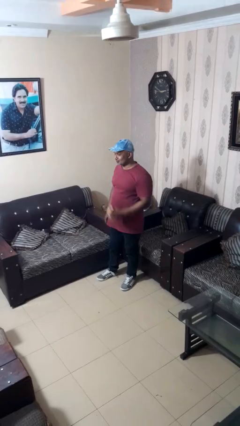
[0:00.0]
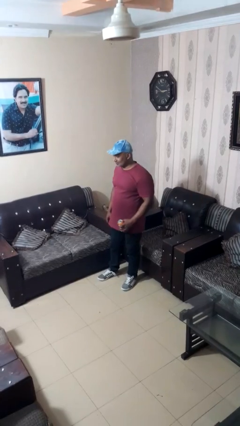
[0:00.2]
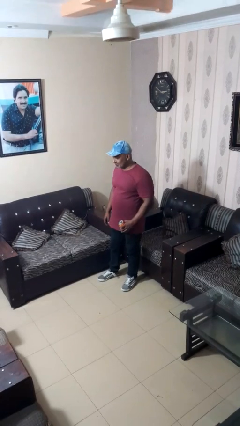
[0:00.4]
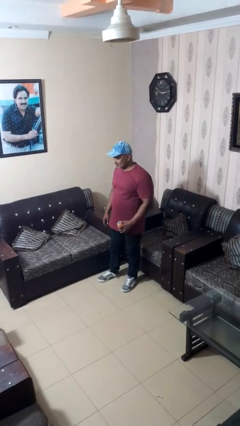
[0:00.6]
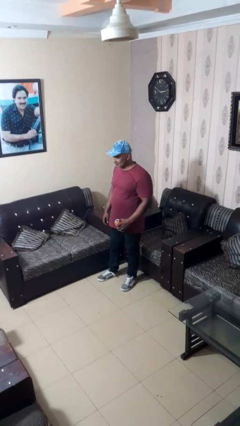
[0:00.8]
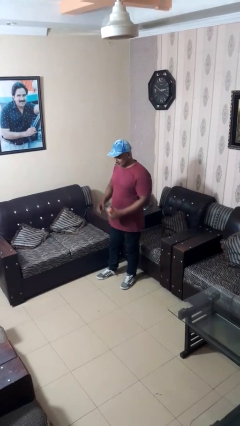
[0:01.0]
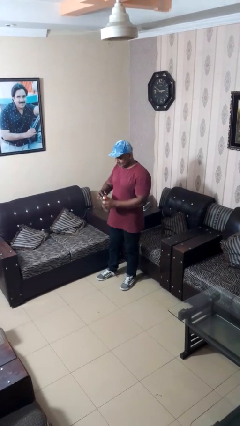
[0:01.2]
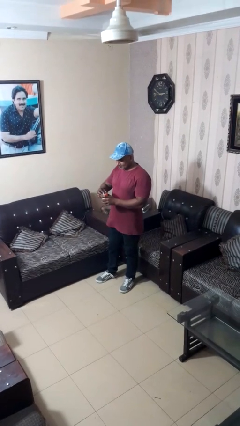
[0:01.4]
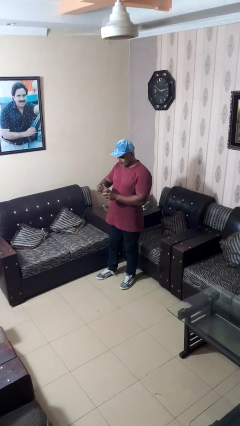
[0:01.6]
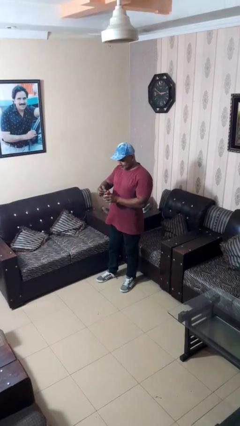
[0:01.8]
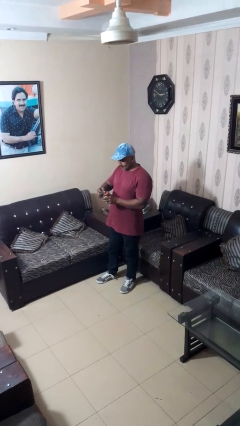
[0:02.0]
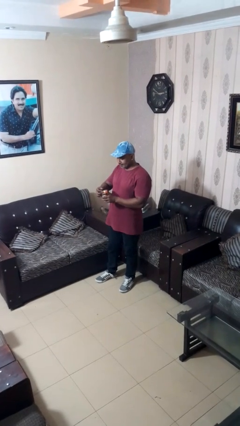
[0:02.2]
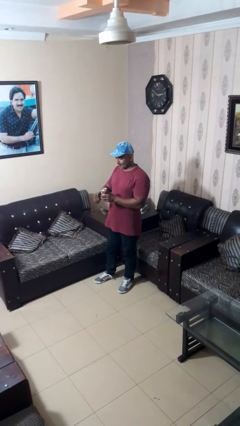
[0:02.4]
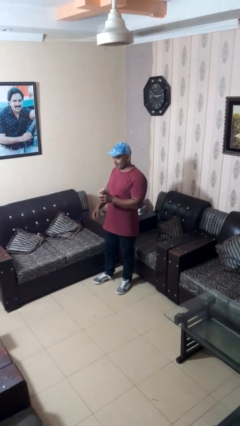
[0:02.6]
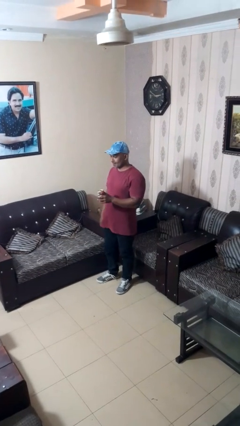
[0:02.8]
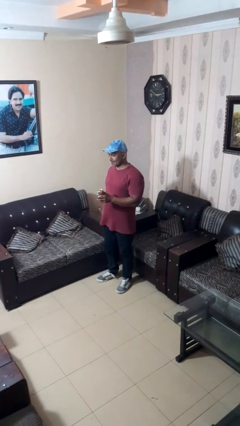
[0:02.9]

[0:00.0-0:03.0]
person opens beverage can

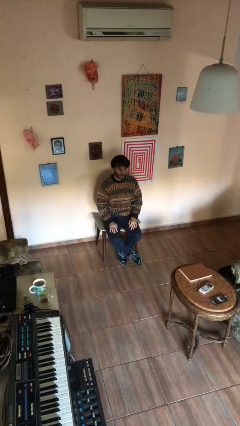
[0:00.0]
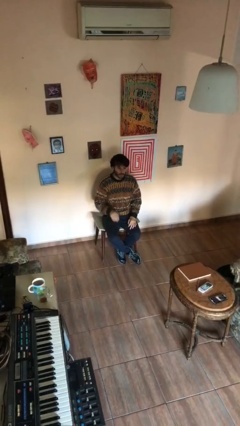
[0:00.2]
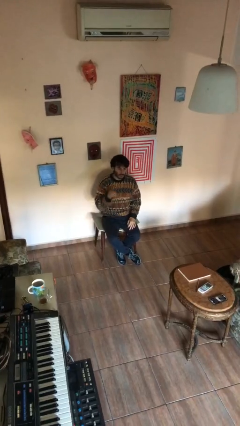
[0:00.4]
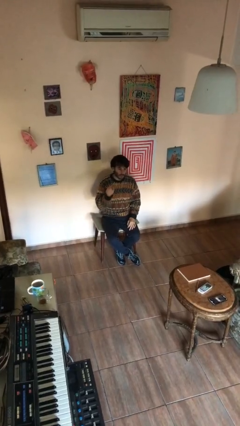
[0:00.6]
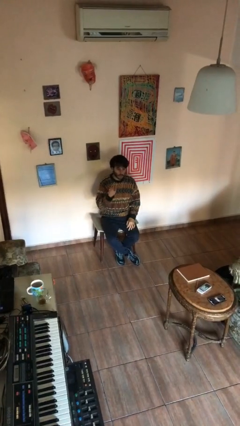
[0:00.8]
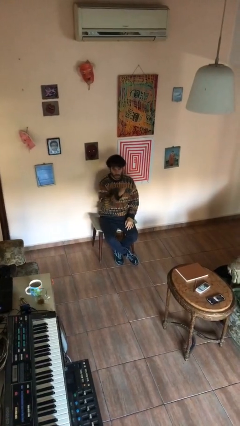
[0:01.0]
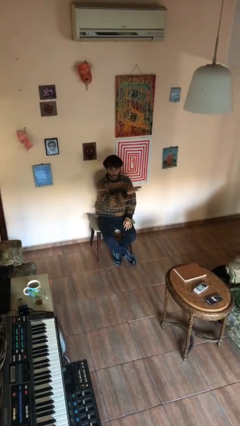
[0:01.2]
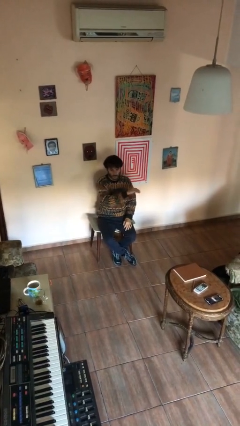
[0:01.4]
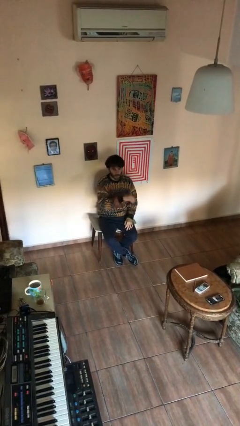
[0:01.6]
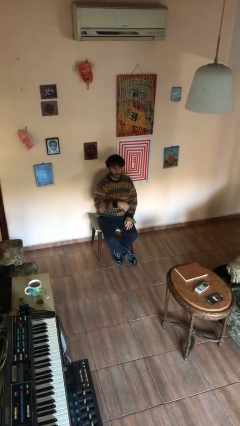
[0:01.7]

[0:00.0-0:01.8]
person gestures swipe left

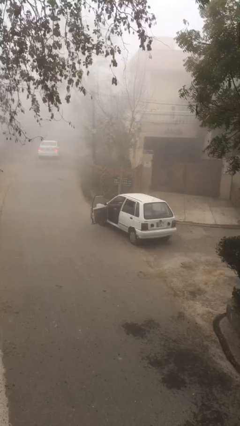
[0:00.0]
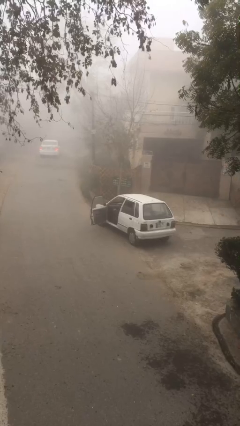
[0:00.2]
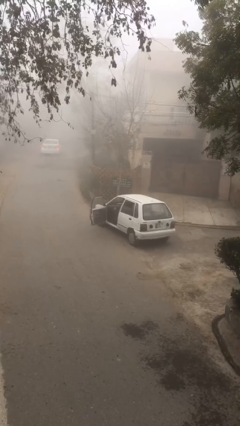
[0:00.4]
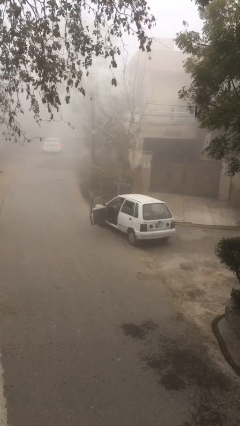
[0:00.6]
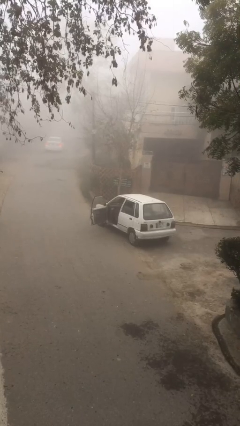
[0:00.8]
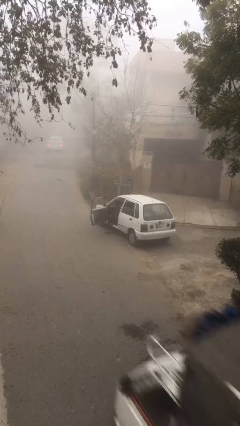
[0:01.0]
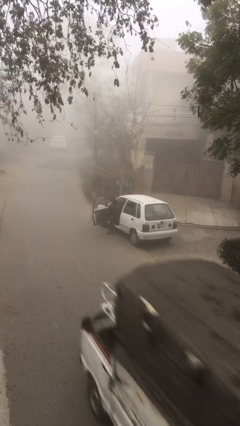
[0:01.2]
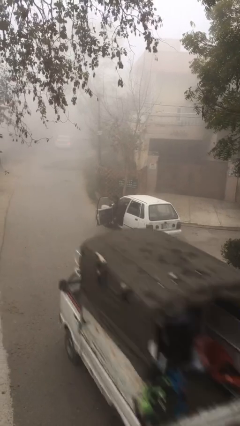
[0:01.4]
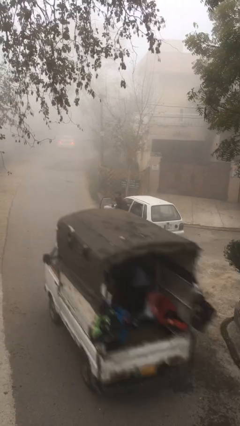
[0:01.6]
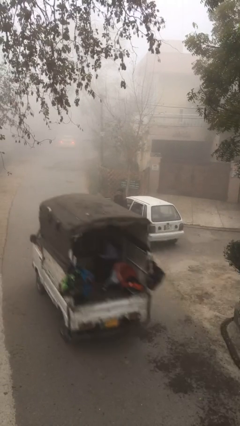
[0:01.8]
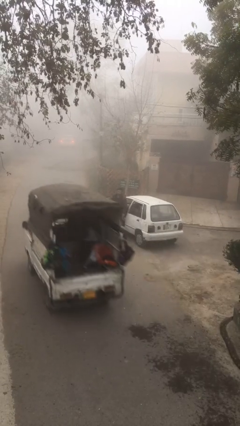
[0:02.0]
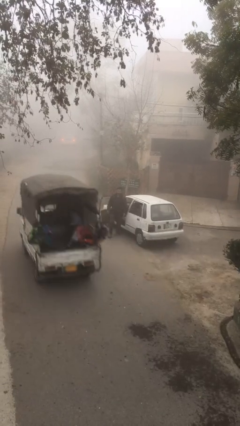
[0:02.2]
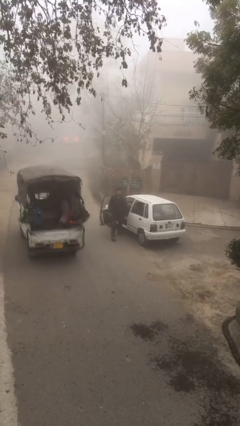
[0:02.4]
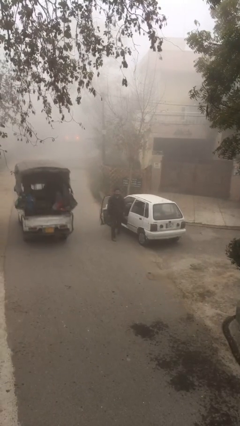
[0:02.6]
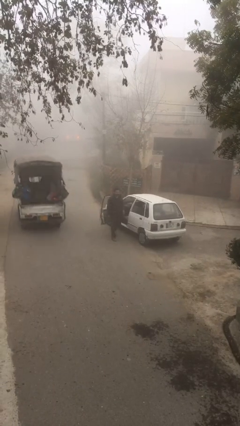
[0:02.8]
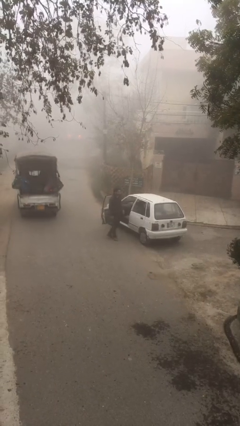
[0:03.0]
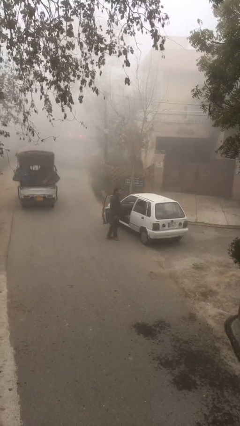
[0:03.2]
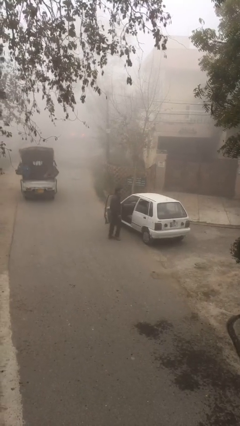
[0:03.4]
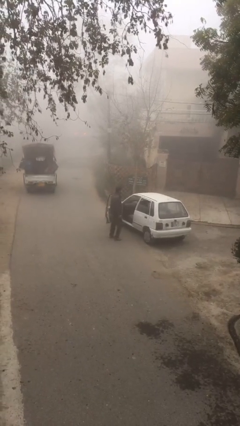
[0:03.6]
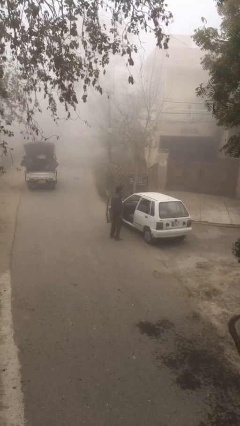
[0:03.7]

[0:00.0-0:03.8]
person exits car

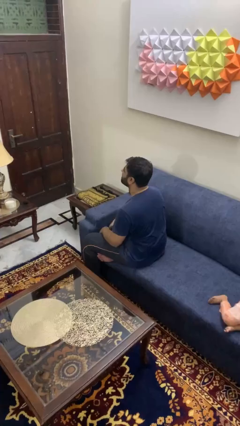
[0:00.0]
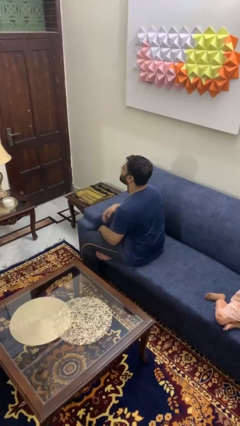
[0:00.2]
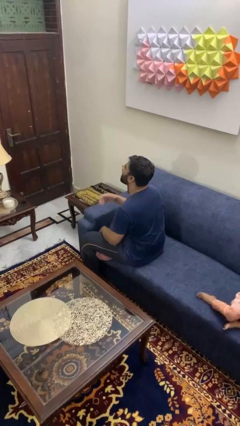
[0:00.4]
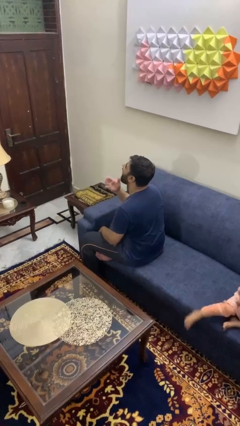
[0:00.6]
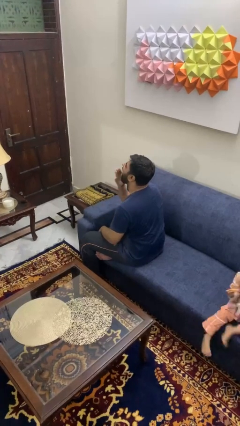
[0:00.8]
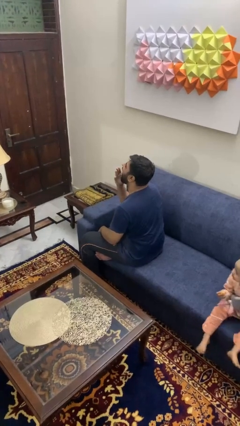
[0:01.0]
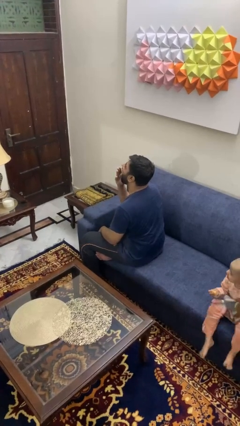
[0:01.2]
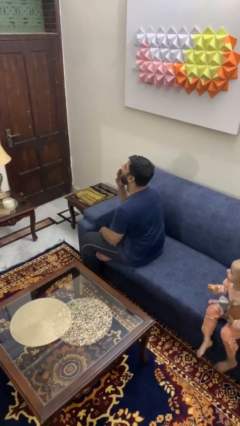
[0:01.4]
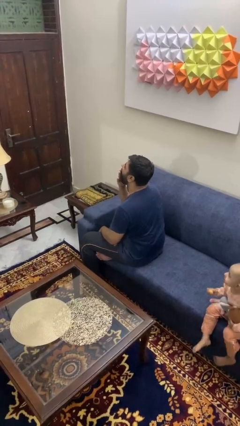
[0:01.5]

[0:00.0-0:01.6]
person yawns

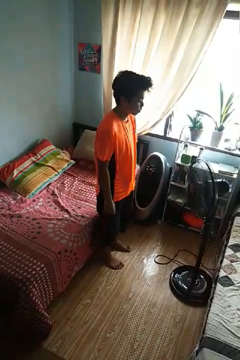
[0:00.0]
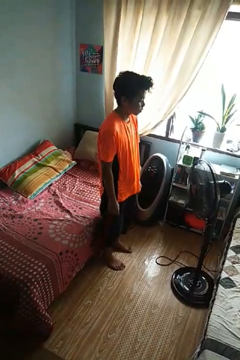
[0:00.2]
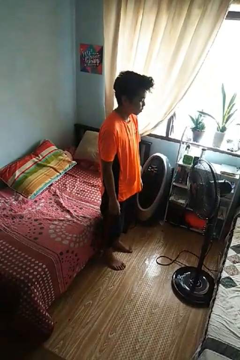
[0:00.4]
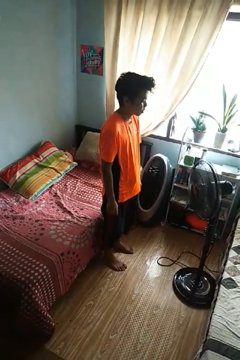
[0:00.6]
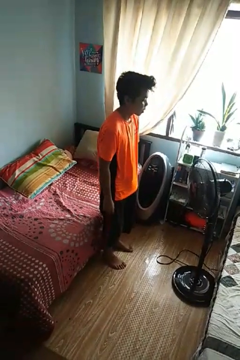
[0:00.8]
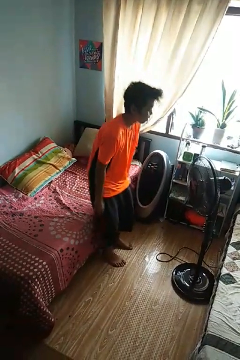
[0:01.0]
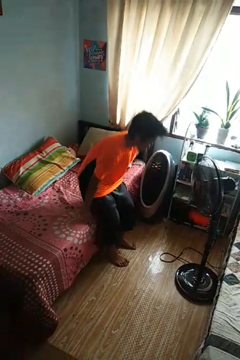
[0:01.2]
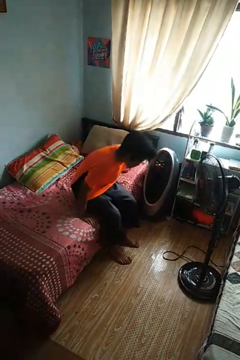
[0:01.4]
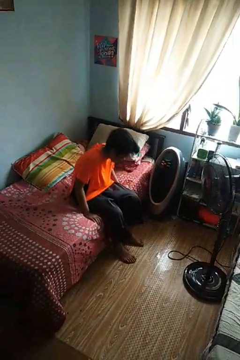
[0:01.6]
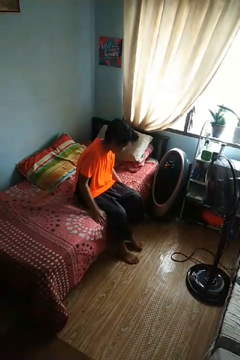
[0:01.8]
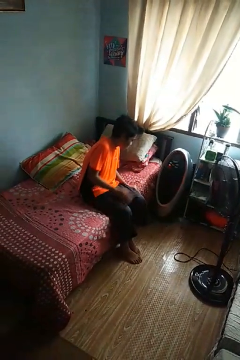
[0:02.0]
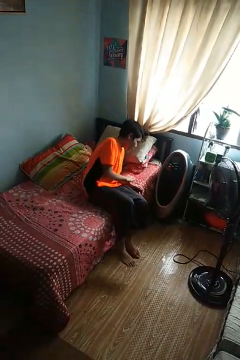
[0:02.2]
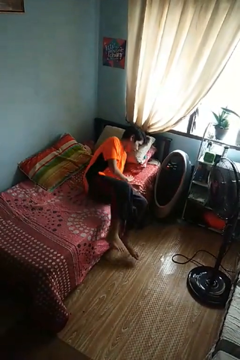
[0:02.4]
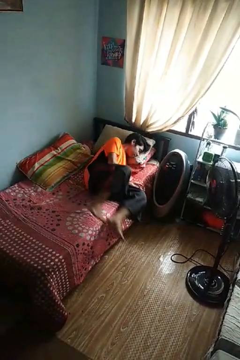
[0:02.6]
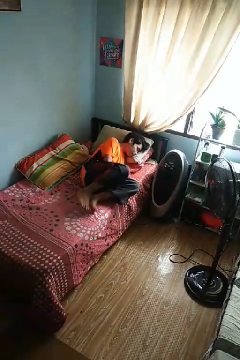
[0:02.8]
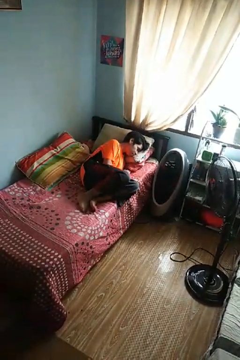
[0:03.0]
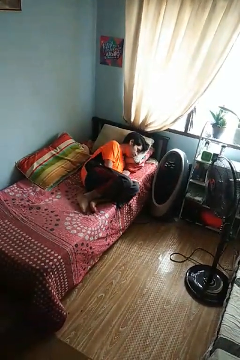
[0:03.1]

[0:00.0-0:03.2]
person lies down on bed

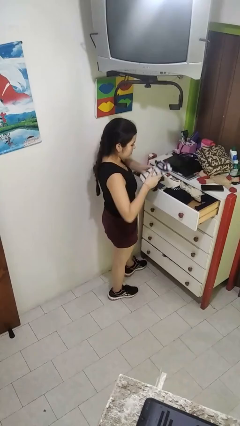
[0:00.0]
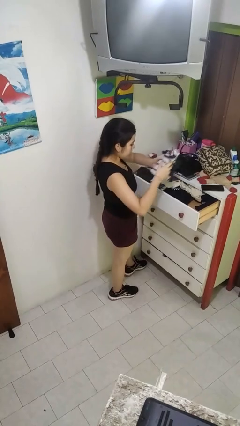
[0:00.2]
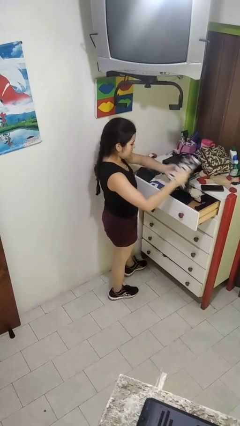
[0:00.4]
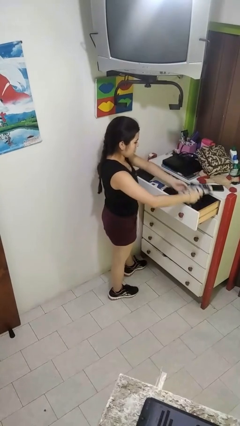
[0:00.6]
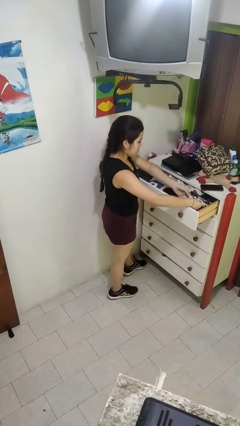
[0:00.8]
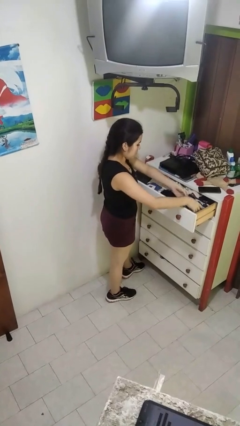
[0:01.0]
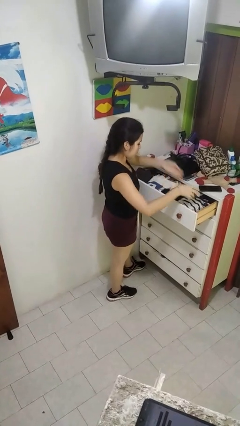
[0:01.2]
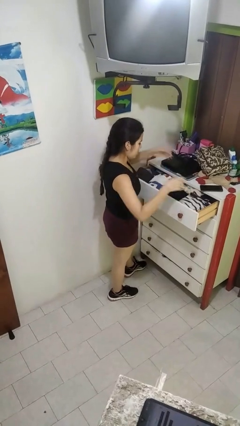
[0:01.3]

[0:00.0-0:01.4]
person puts clothes into dresser

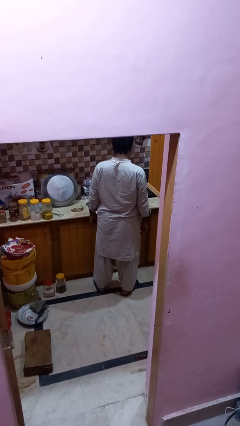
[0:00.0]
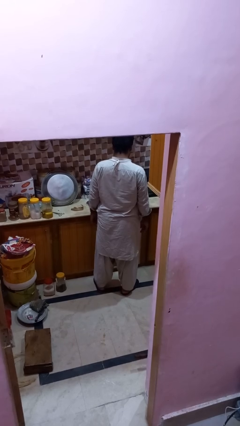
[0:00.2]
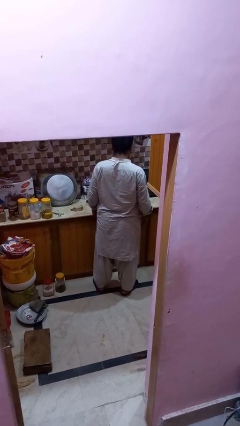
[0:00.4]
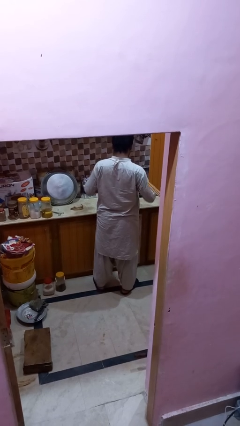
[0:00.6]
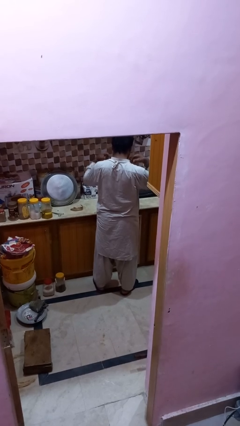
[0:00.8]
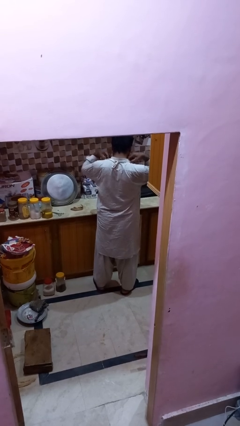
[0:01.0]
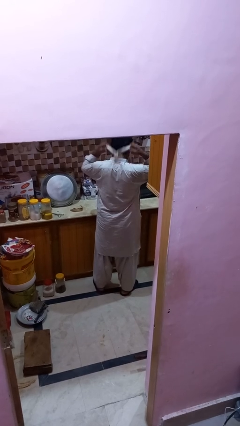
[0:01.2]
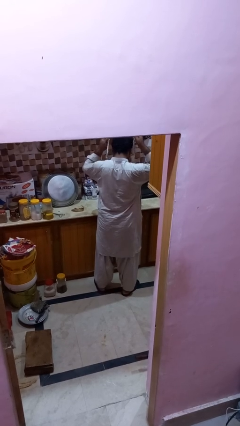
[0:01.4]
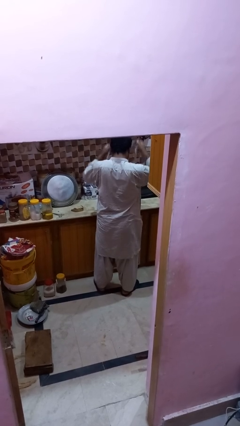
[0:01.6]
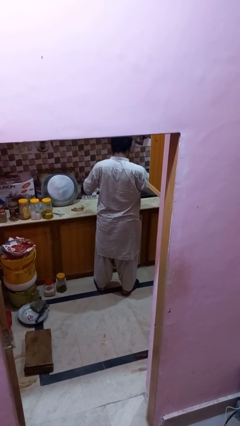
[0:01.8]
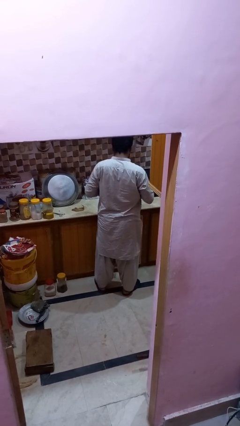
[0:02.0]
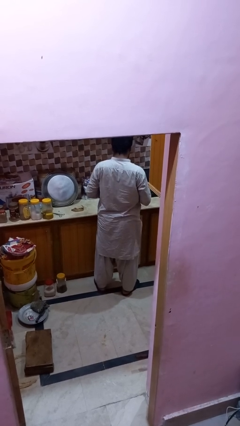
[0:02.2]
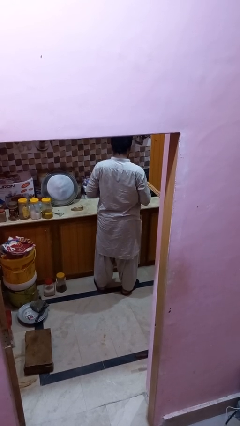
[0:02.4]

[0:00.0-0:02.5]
person takes off apron
